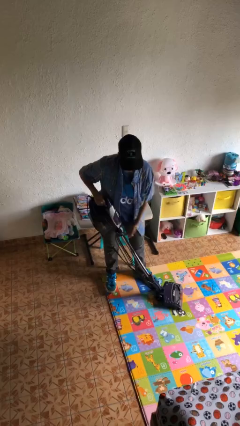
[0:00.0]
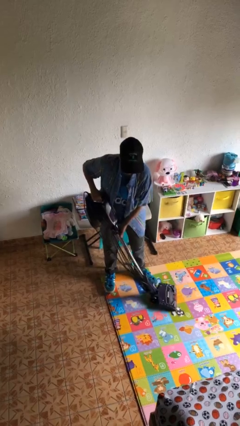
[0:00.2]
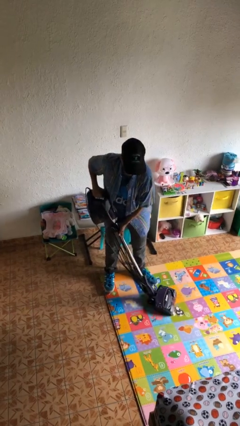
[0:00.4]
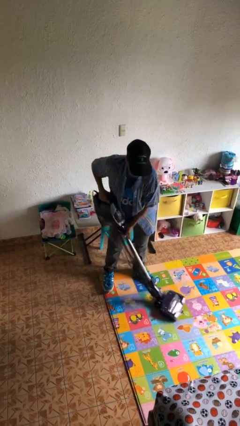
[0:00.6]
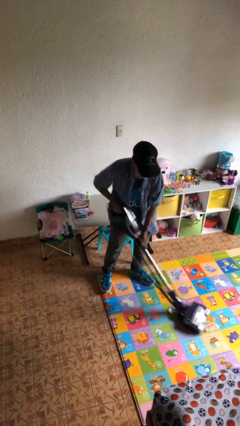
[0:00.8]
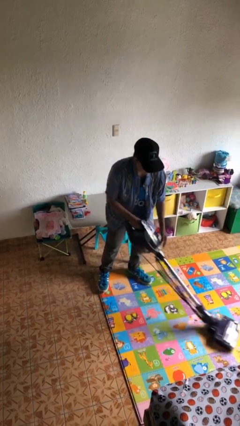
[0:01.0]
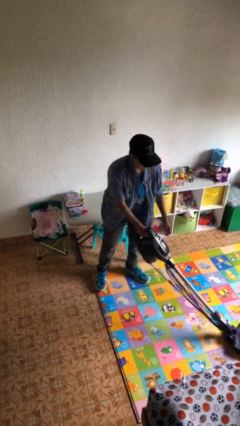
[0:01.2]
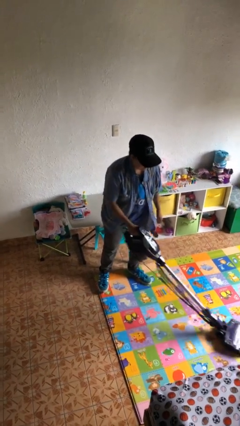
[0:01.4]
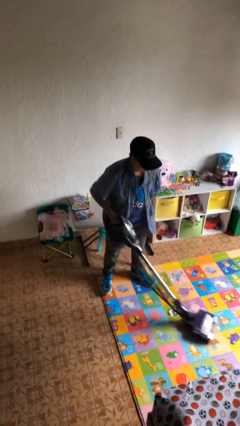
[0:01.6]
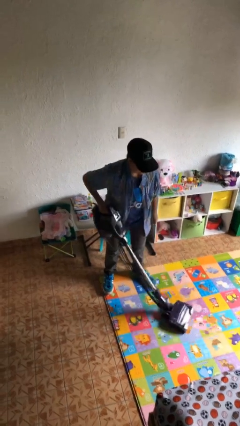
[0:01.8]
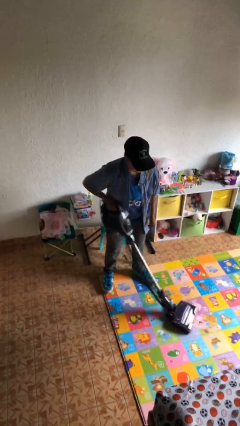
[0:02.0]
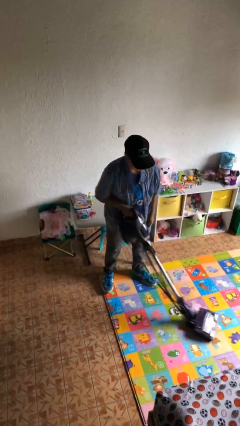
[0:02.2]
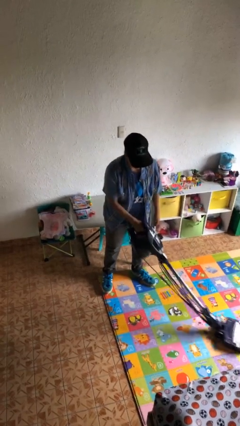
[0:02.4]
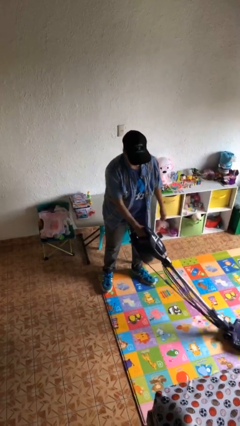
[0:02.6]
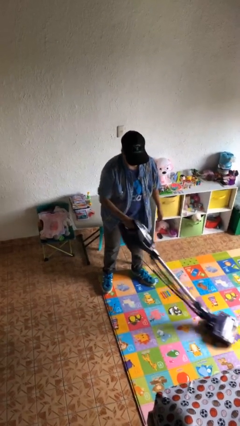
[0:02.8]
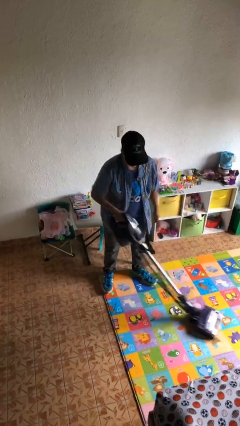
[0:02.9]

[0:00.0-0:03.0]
person vacuums carpet

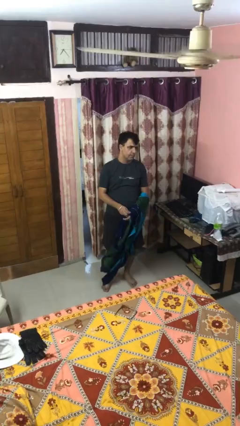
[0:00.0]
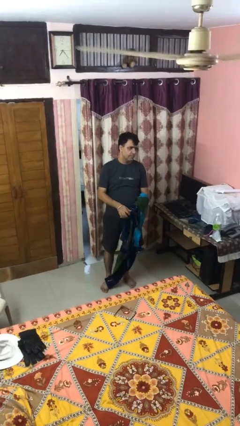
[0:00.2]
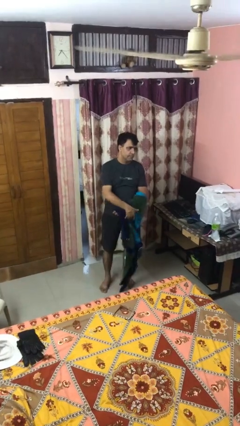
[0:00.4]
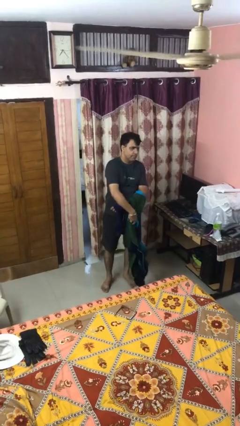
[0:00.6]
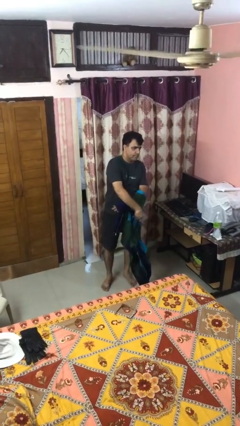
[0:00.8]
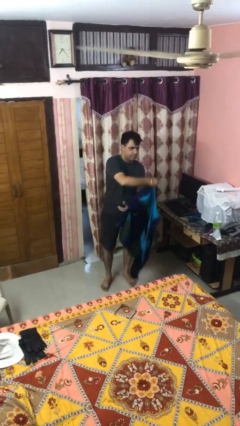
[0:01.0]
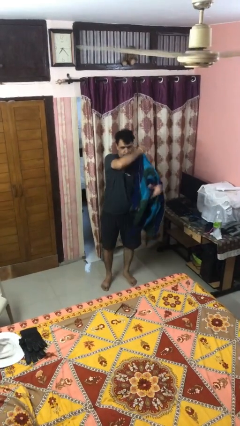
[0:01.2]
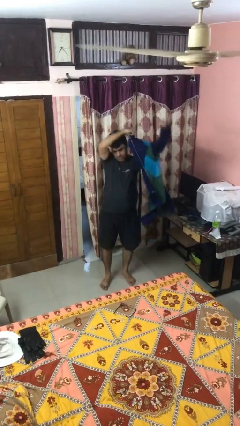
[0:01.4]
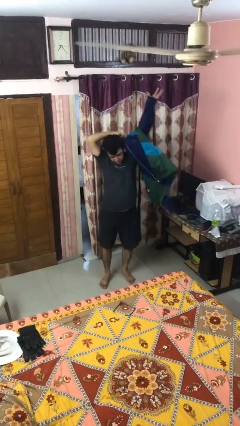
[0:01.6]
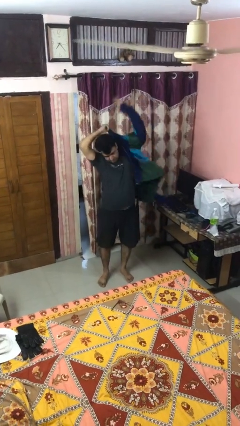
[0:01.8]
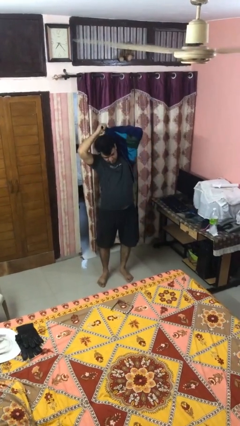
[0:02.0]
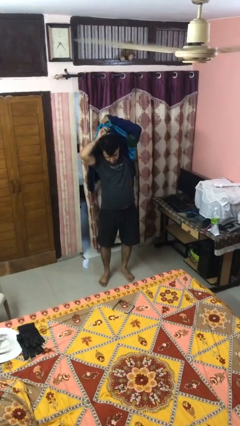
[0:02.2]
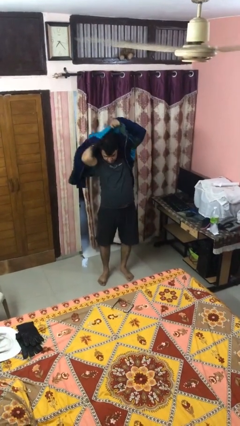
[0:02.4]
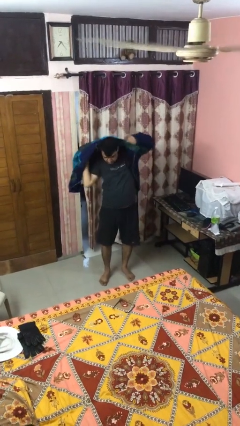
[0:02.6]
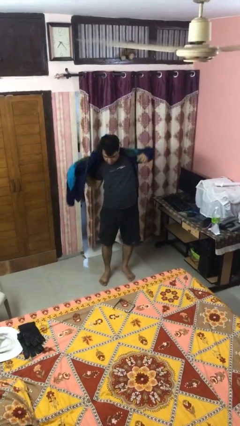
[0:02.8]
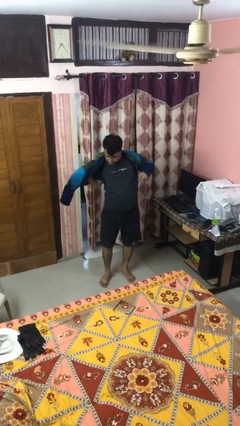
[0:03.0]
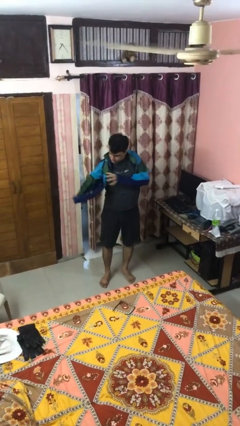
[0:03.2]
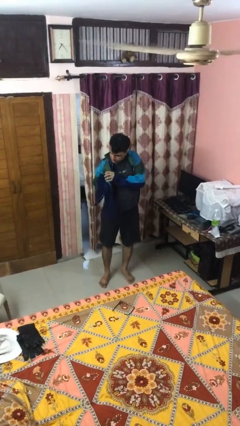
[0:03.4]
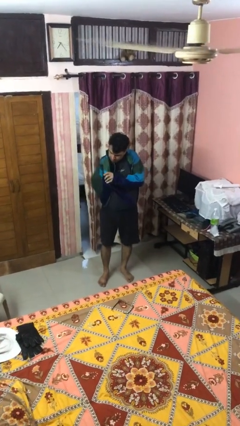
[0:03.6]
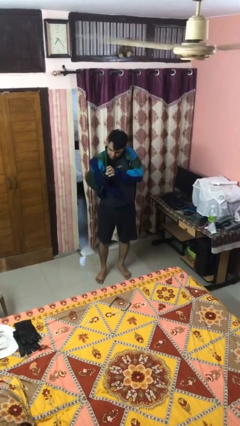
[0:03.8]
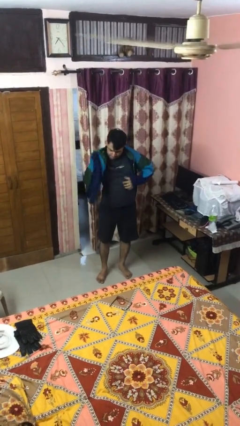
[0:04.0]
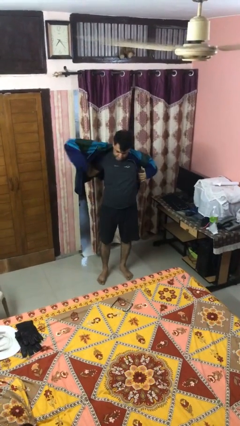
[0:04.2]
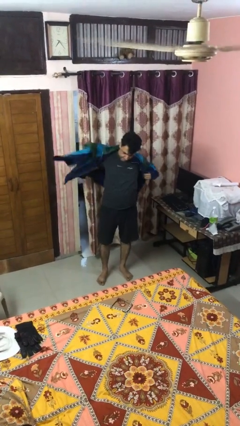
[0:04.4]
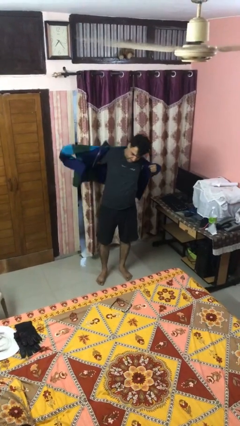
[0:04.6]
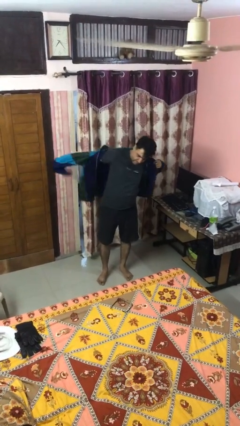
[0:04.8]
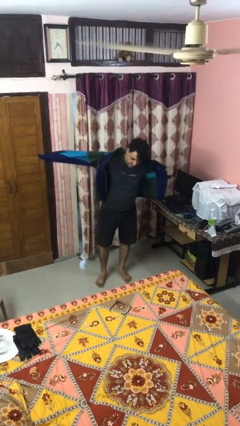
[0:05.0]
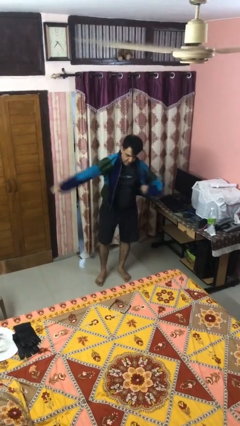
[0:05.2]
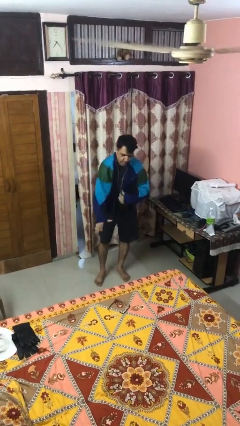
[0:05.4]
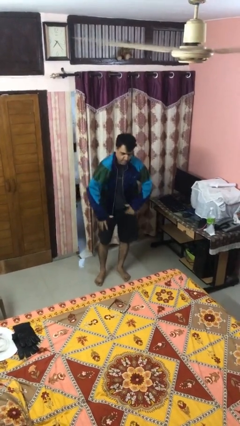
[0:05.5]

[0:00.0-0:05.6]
person puts on jacket

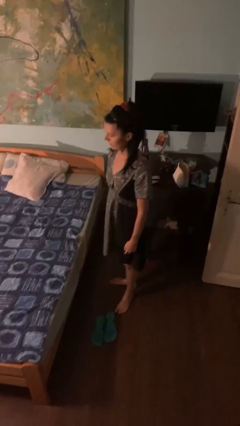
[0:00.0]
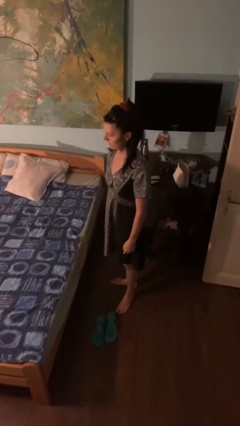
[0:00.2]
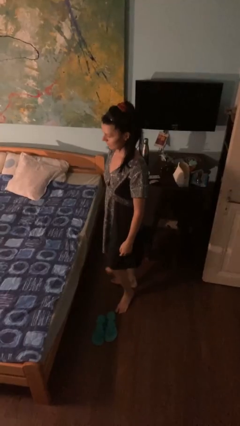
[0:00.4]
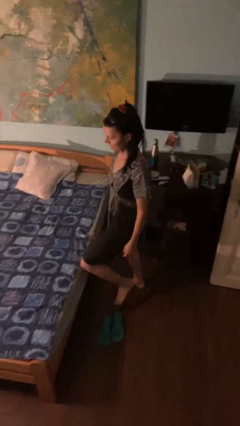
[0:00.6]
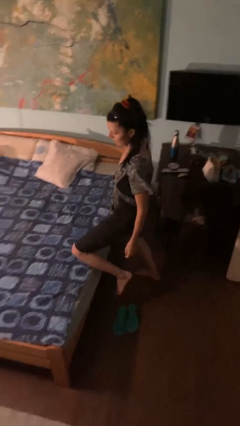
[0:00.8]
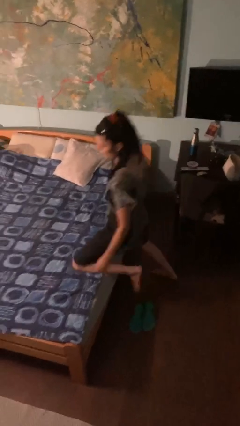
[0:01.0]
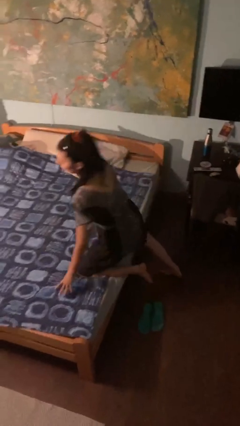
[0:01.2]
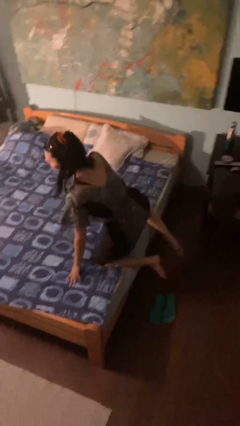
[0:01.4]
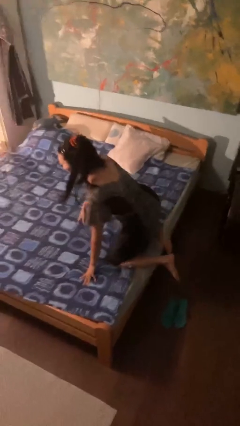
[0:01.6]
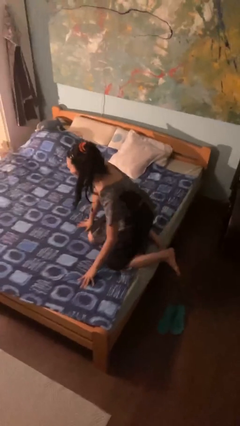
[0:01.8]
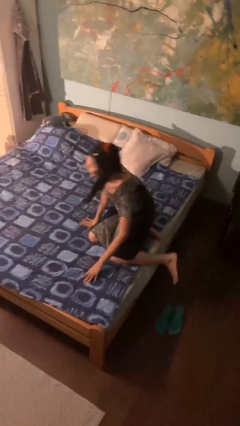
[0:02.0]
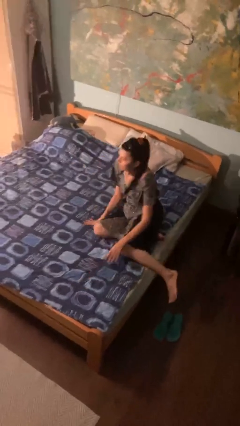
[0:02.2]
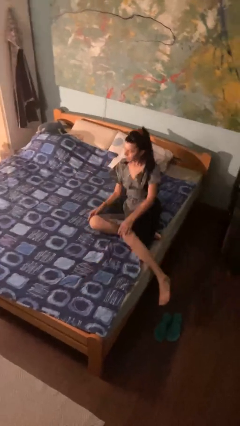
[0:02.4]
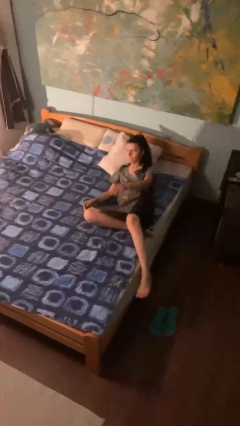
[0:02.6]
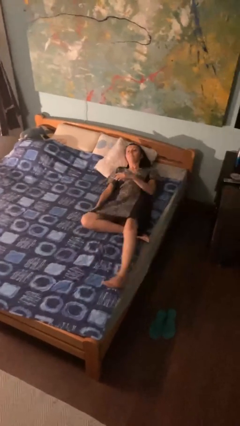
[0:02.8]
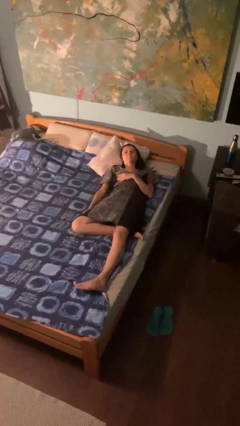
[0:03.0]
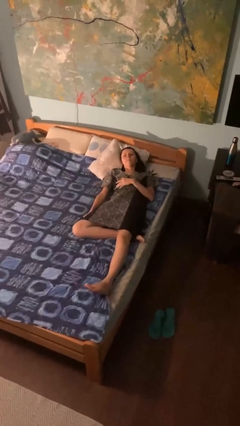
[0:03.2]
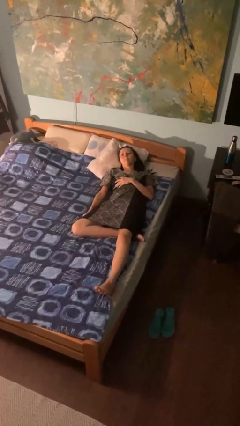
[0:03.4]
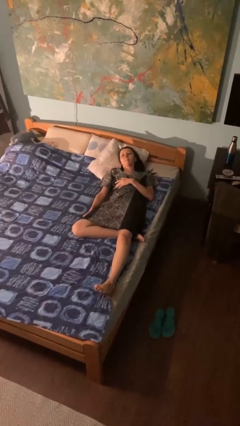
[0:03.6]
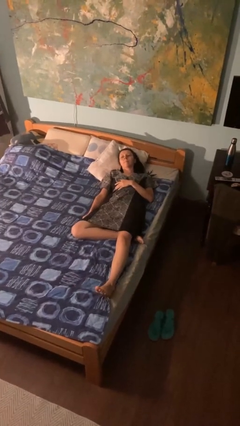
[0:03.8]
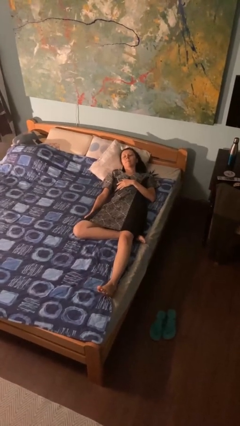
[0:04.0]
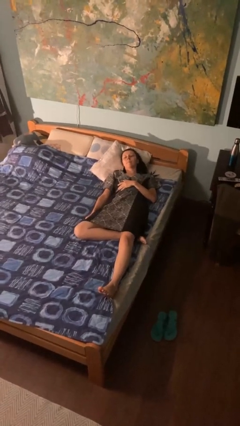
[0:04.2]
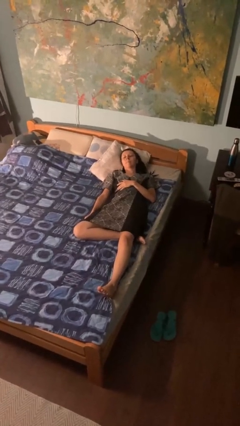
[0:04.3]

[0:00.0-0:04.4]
person lies down on bed

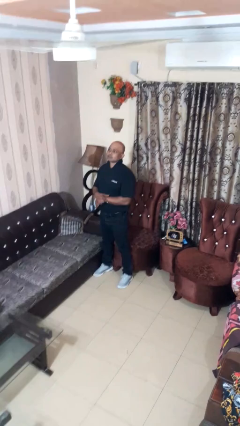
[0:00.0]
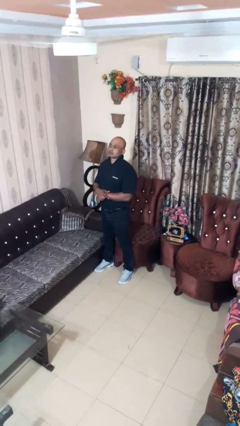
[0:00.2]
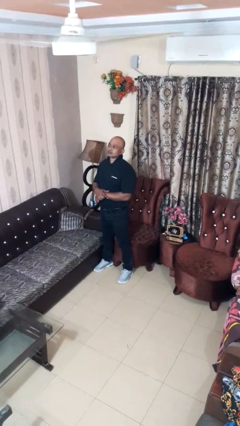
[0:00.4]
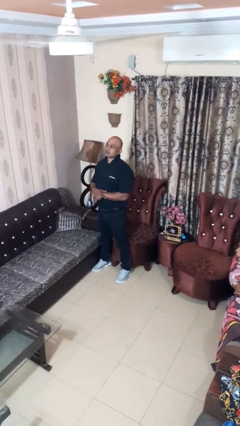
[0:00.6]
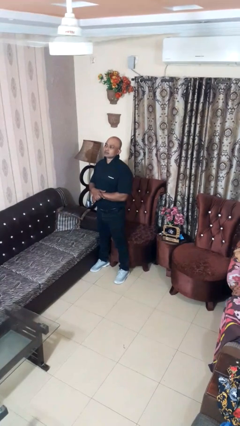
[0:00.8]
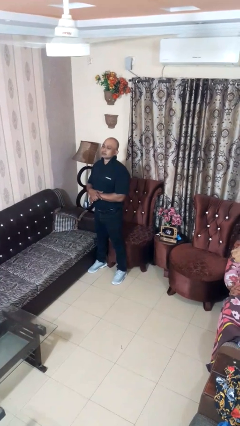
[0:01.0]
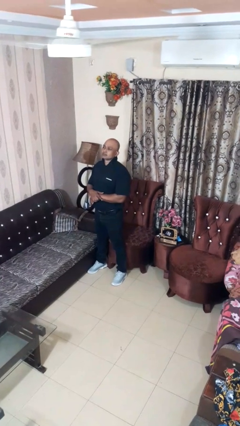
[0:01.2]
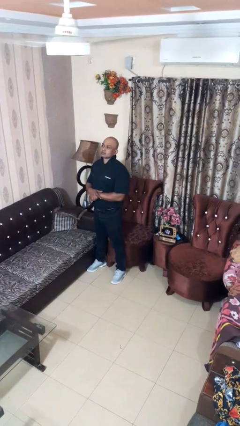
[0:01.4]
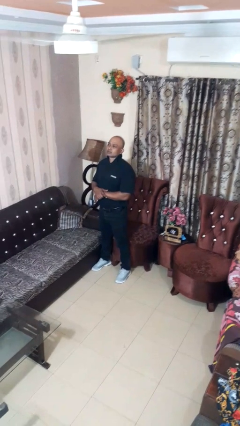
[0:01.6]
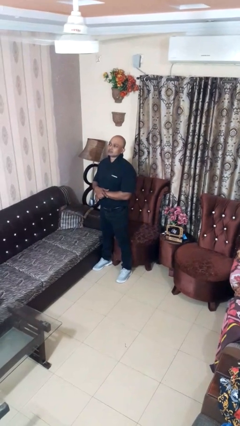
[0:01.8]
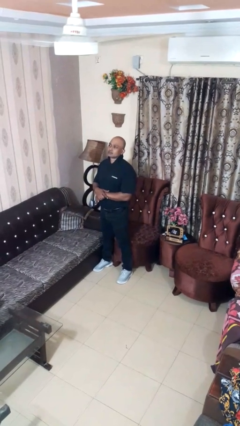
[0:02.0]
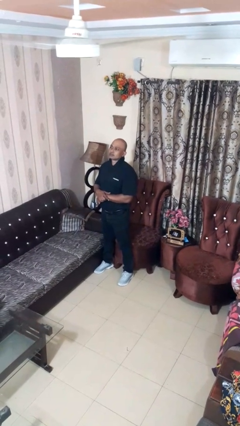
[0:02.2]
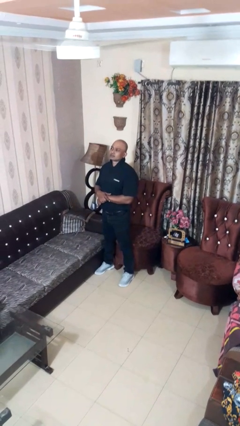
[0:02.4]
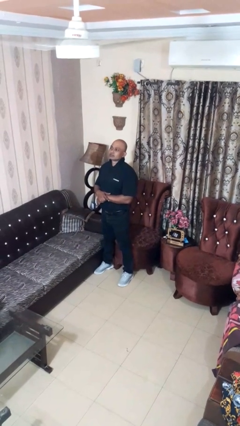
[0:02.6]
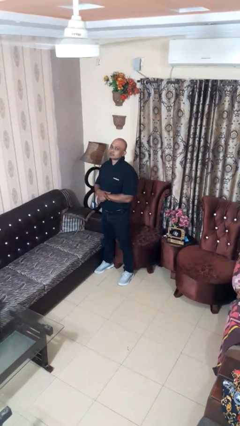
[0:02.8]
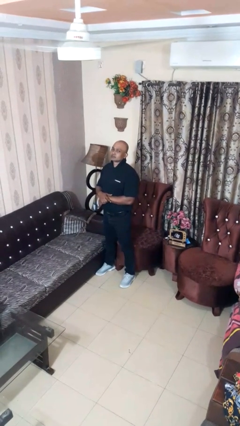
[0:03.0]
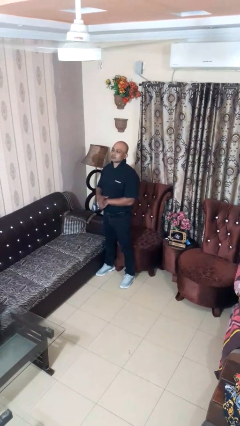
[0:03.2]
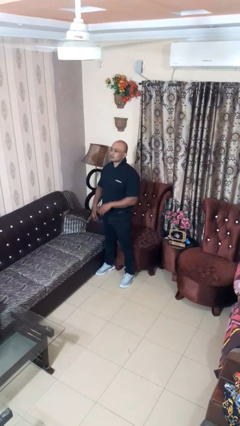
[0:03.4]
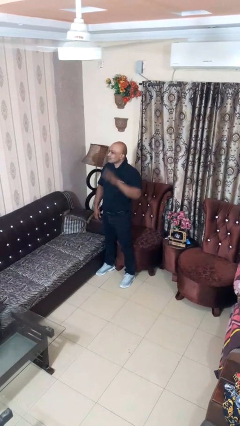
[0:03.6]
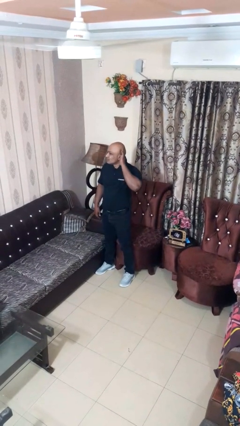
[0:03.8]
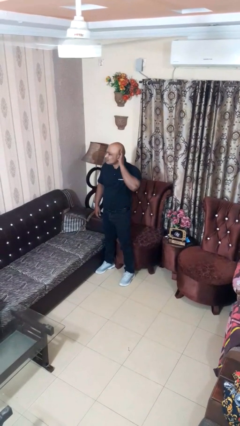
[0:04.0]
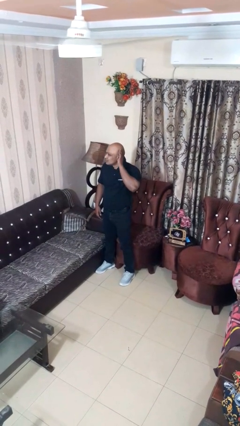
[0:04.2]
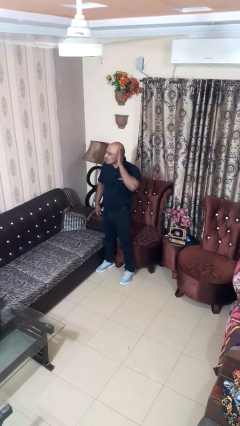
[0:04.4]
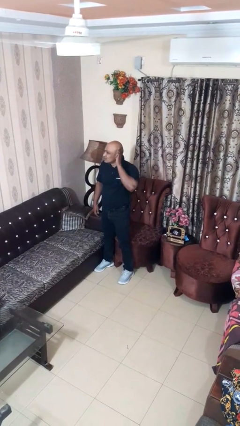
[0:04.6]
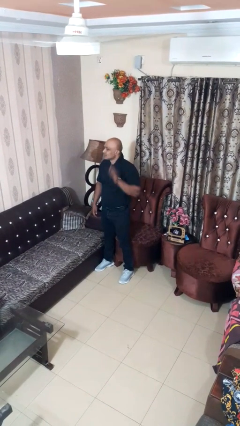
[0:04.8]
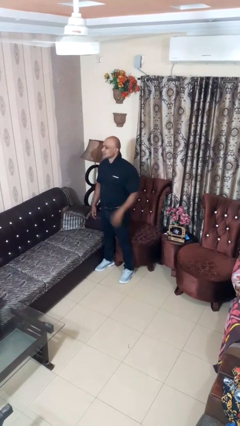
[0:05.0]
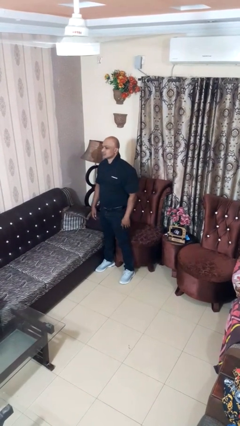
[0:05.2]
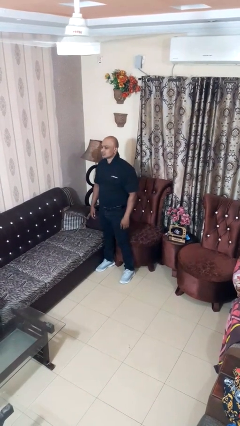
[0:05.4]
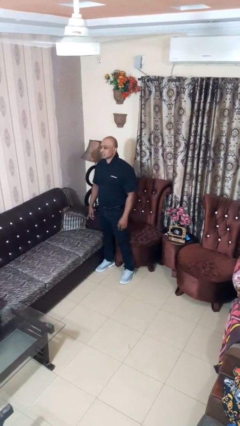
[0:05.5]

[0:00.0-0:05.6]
person gestures listen closely
